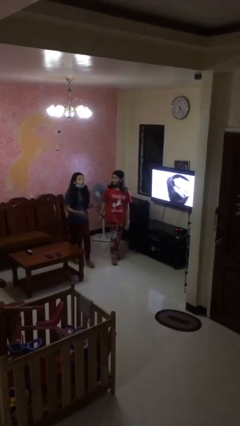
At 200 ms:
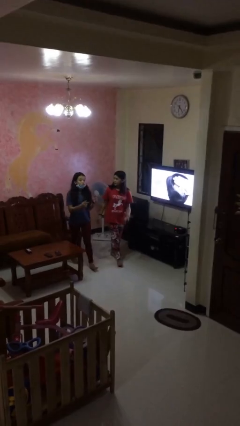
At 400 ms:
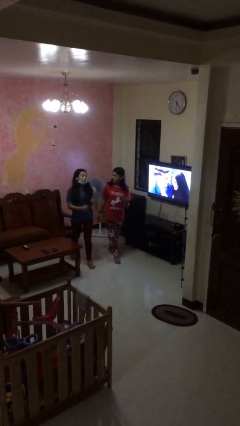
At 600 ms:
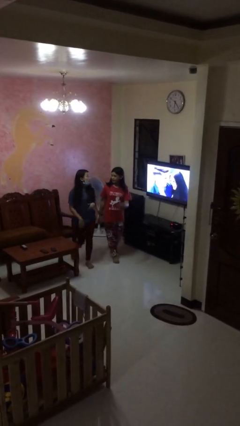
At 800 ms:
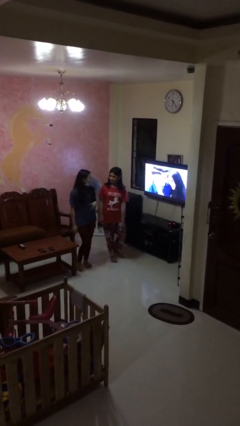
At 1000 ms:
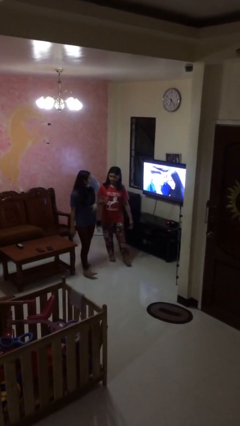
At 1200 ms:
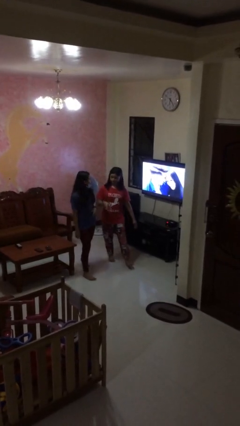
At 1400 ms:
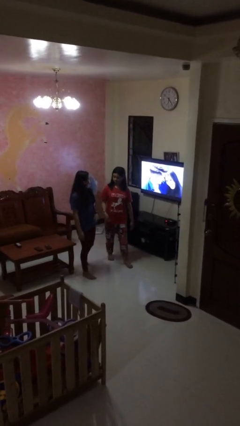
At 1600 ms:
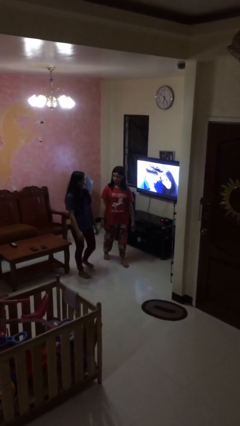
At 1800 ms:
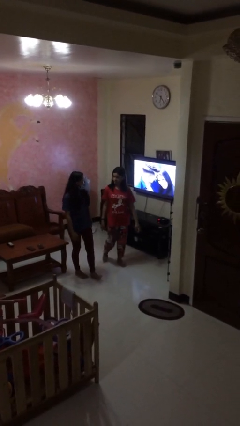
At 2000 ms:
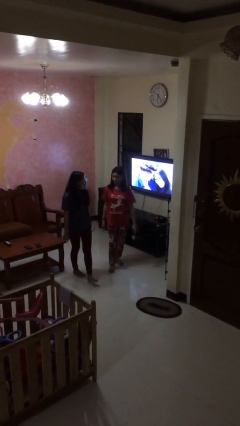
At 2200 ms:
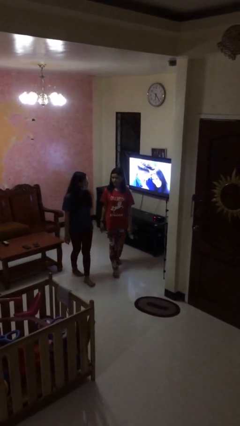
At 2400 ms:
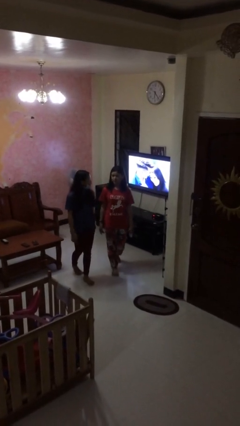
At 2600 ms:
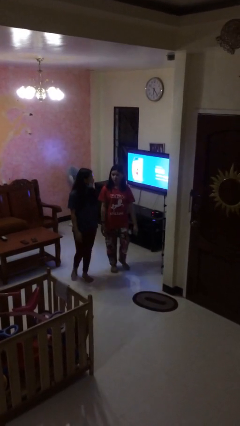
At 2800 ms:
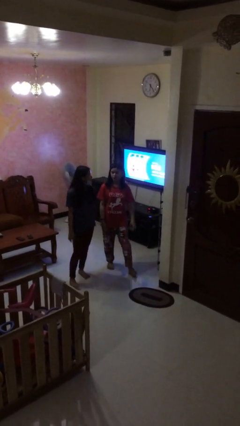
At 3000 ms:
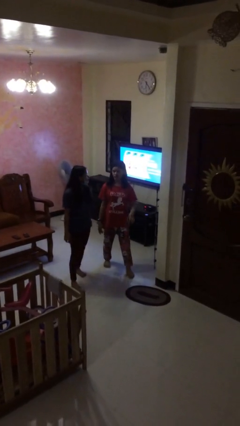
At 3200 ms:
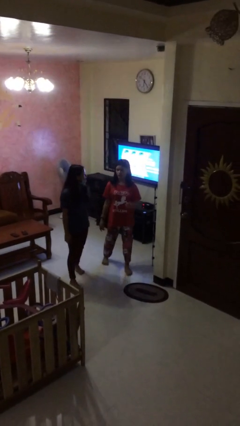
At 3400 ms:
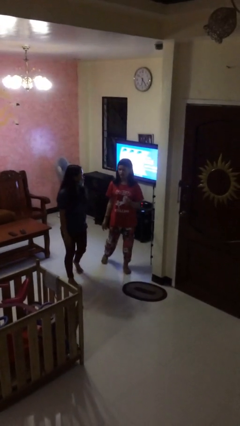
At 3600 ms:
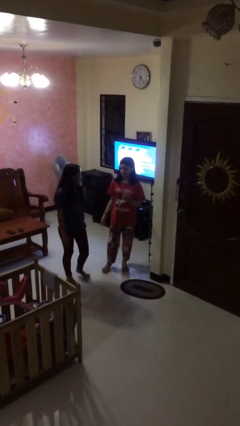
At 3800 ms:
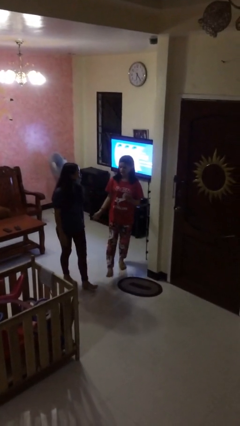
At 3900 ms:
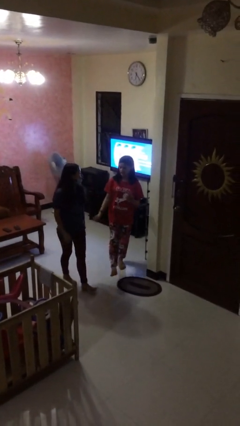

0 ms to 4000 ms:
person talks to person

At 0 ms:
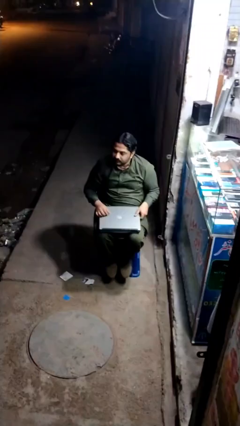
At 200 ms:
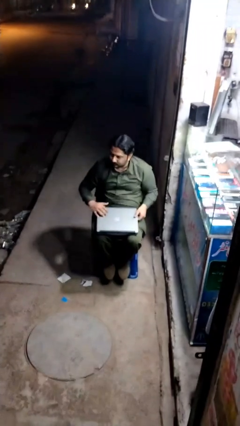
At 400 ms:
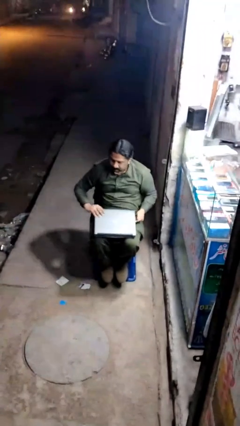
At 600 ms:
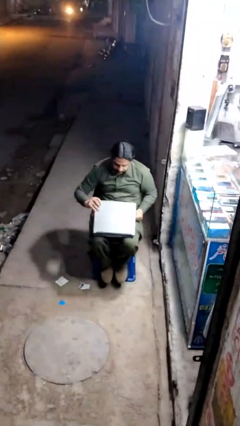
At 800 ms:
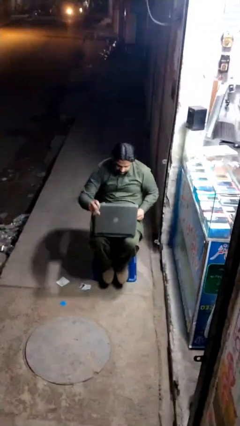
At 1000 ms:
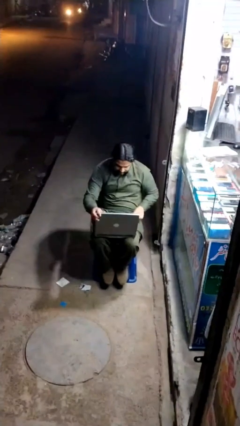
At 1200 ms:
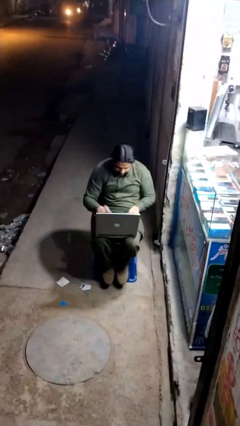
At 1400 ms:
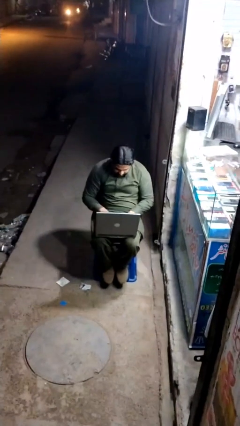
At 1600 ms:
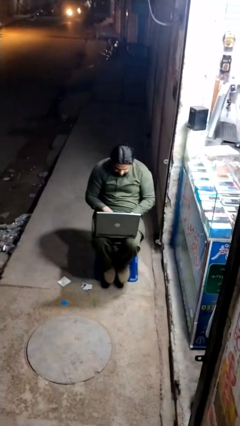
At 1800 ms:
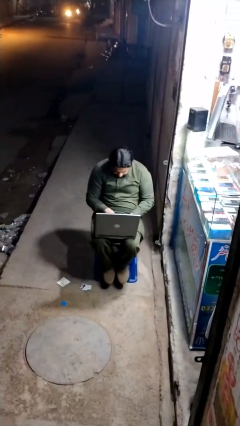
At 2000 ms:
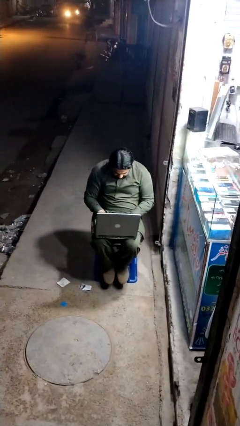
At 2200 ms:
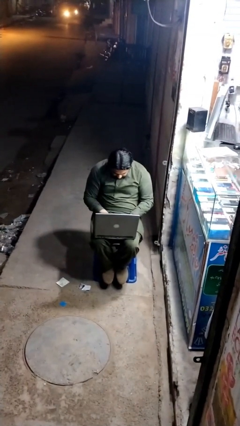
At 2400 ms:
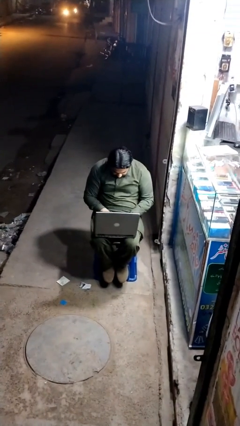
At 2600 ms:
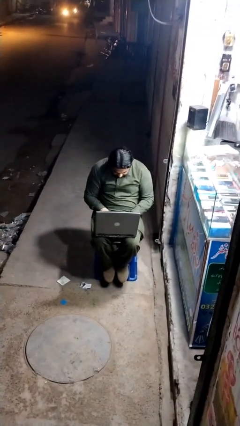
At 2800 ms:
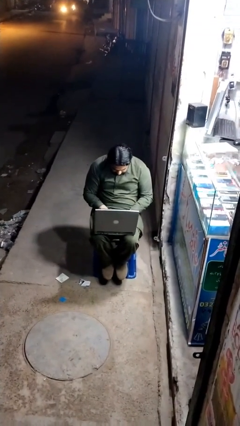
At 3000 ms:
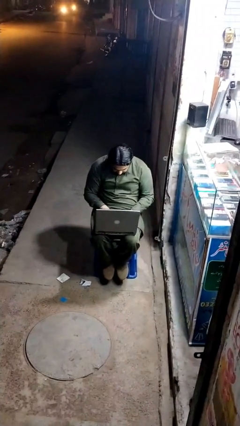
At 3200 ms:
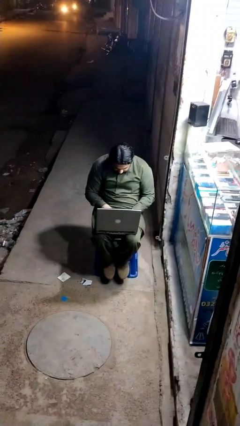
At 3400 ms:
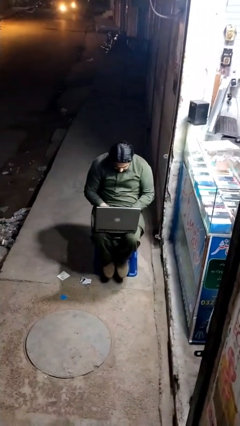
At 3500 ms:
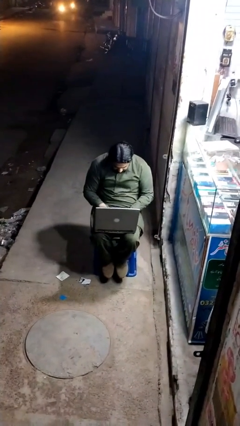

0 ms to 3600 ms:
person interacts with laptop

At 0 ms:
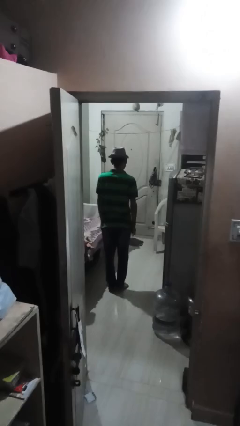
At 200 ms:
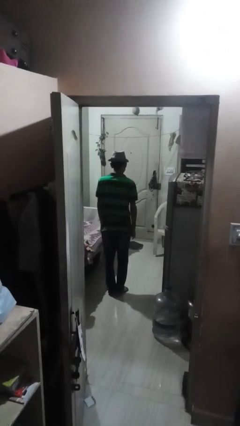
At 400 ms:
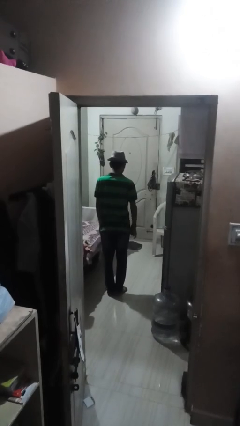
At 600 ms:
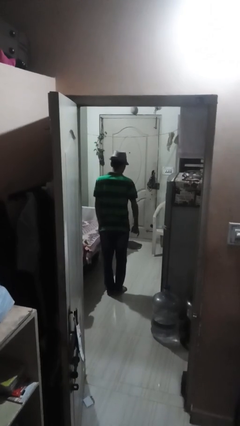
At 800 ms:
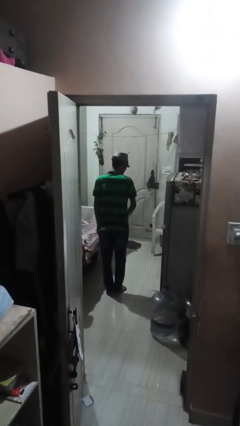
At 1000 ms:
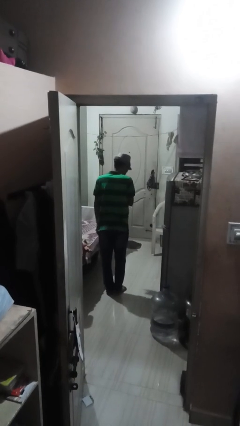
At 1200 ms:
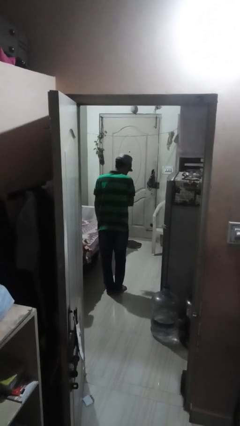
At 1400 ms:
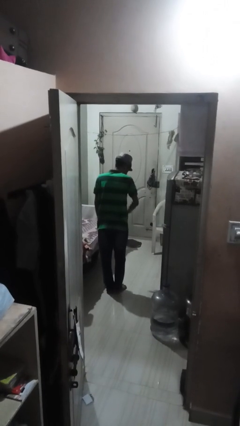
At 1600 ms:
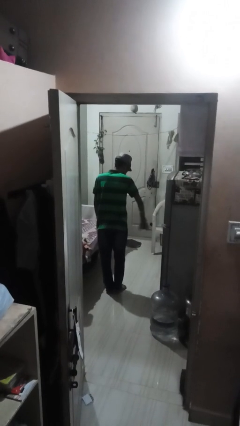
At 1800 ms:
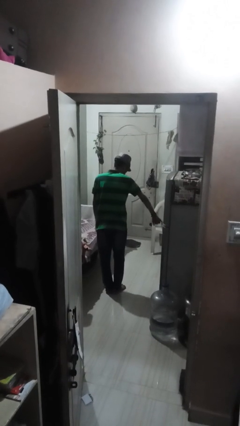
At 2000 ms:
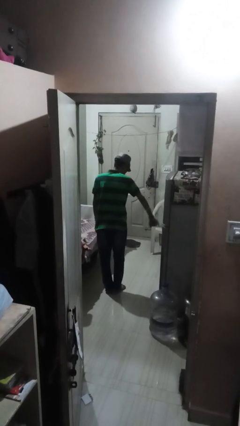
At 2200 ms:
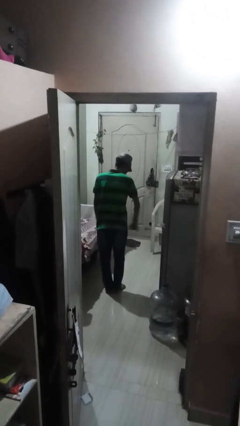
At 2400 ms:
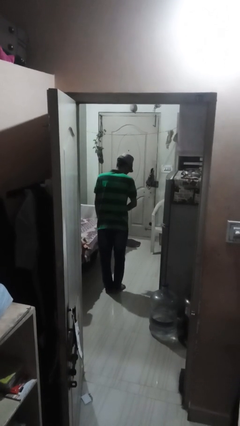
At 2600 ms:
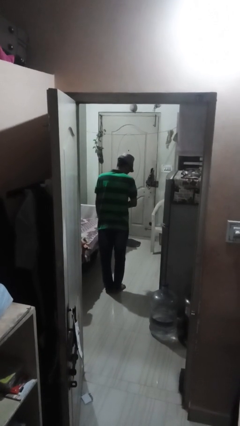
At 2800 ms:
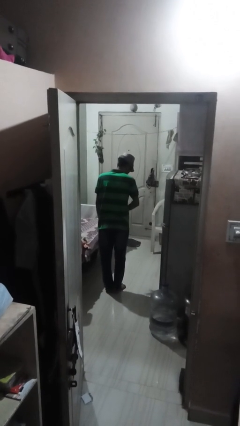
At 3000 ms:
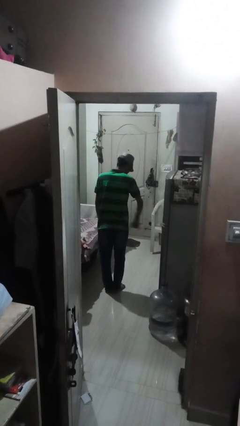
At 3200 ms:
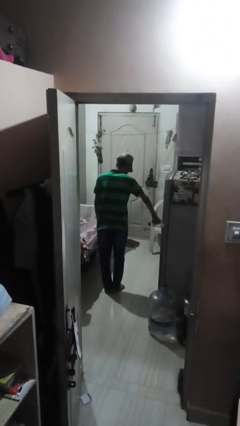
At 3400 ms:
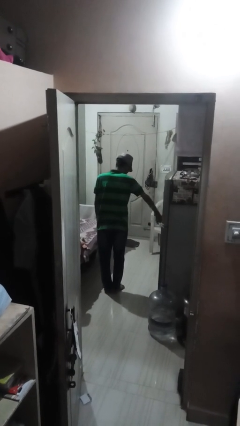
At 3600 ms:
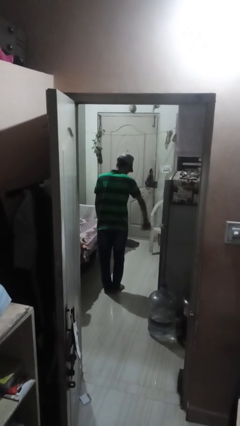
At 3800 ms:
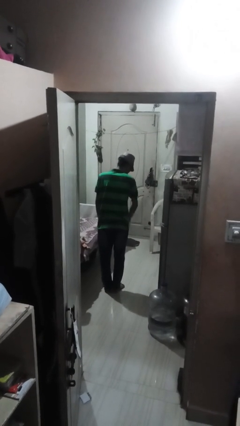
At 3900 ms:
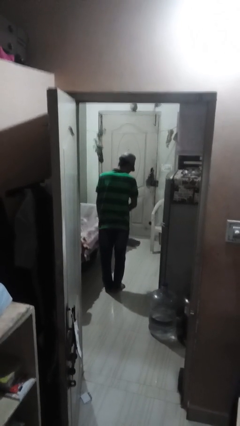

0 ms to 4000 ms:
person gestures hang loose

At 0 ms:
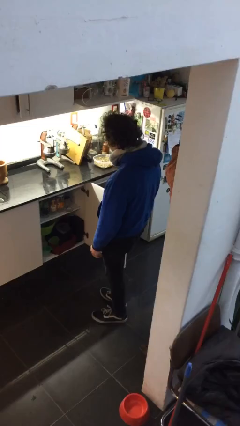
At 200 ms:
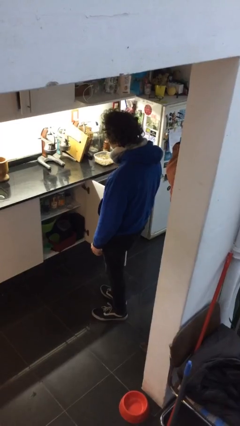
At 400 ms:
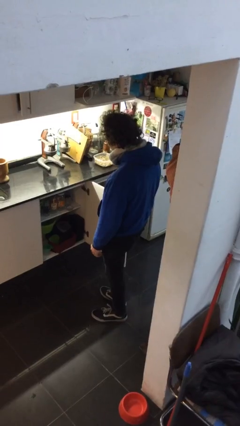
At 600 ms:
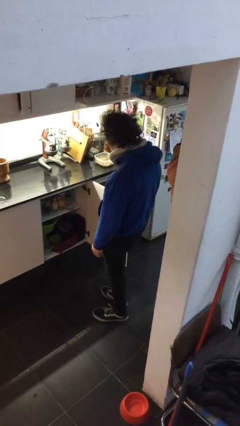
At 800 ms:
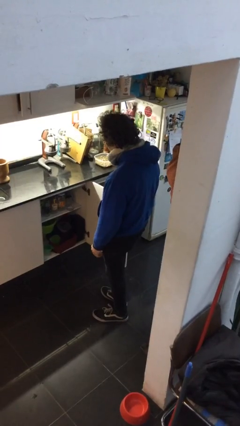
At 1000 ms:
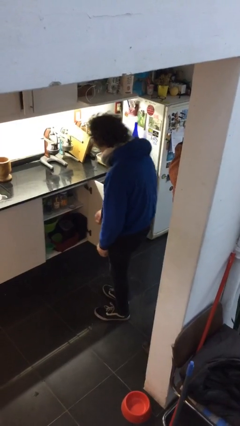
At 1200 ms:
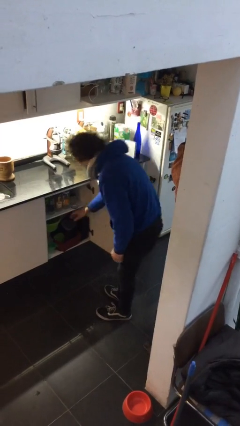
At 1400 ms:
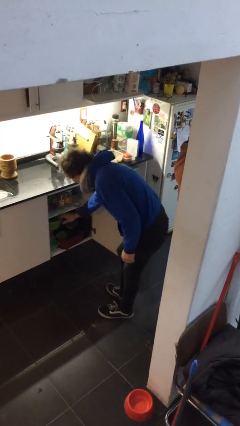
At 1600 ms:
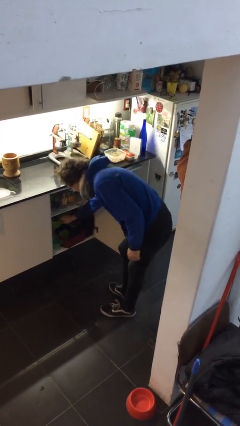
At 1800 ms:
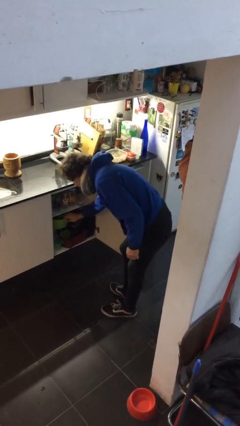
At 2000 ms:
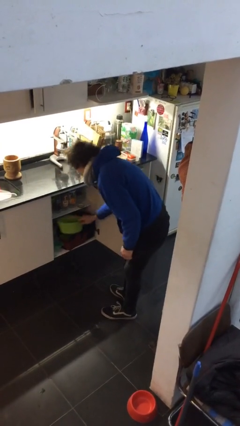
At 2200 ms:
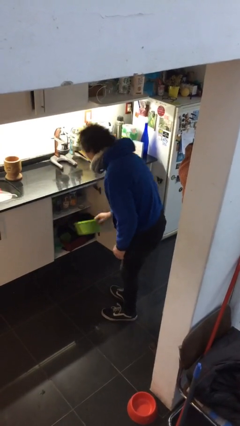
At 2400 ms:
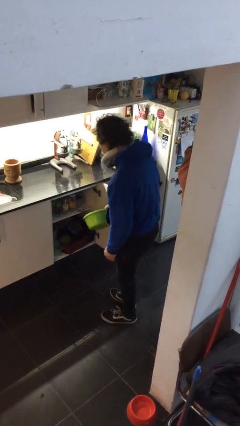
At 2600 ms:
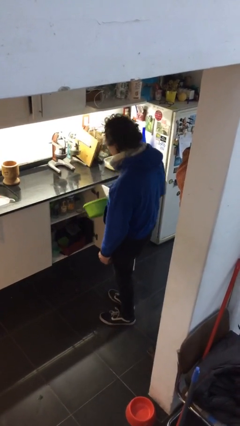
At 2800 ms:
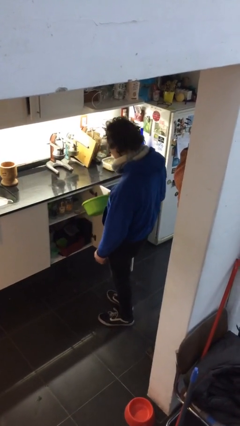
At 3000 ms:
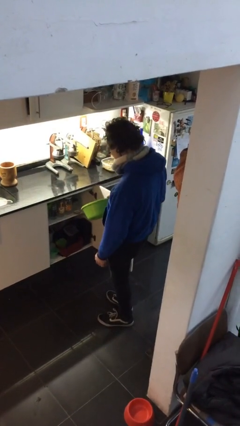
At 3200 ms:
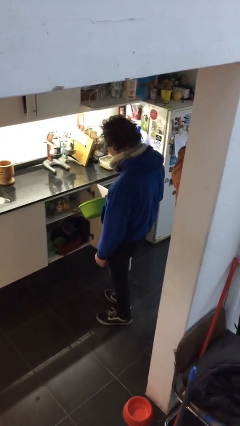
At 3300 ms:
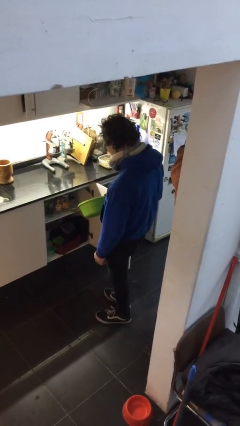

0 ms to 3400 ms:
person picks up object from cabinet

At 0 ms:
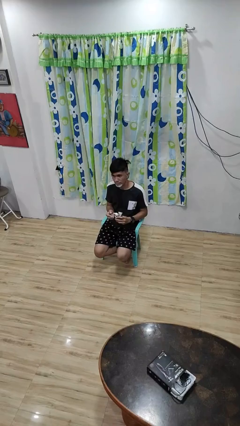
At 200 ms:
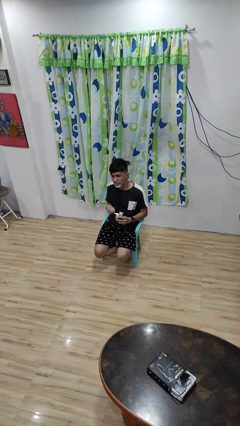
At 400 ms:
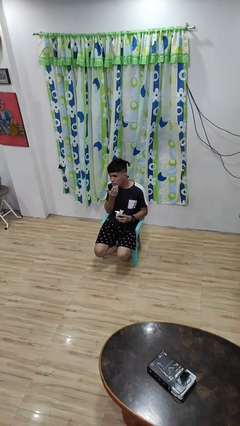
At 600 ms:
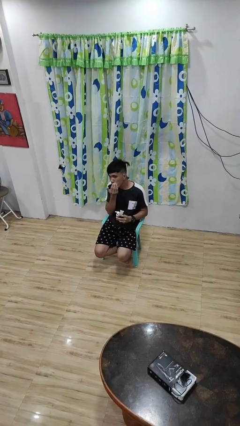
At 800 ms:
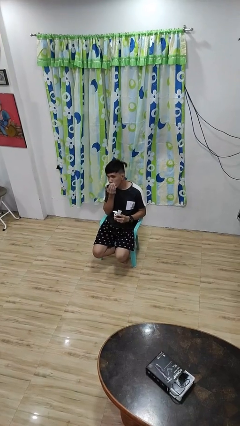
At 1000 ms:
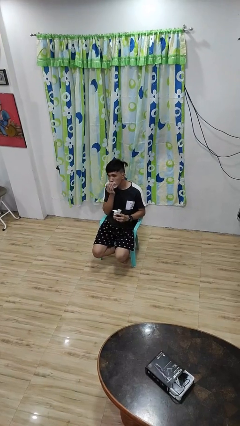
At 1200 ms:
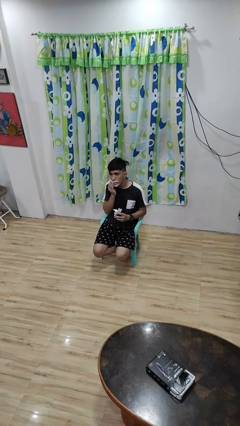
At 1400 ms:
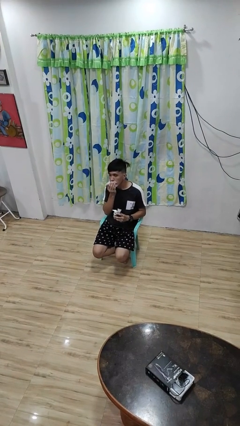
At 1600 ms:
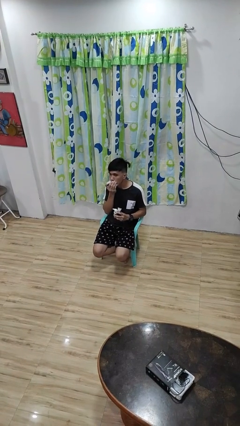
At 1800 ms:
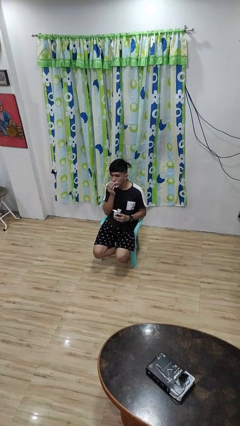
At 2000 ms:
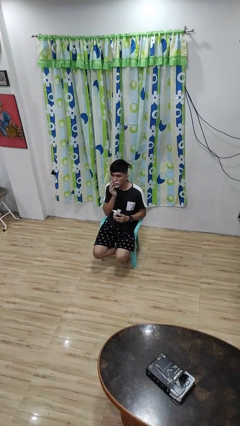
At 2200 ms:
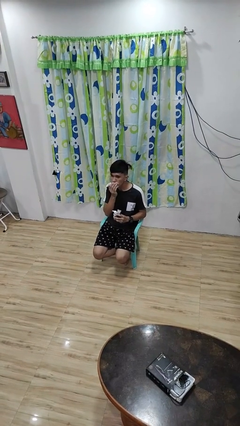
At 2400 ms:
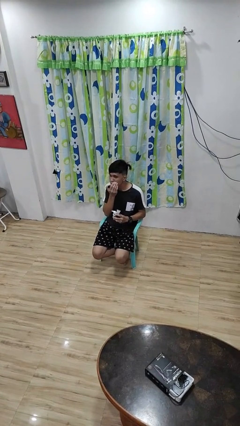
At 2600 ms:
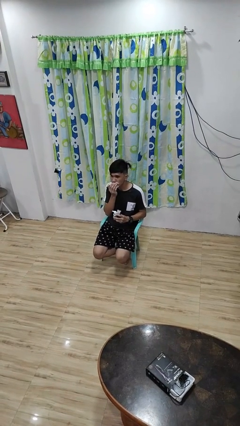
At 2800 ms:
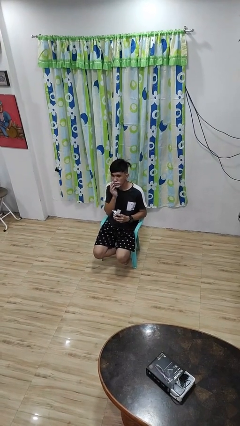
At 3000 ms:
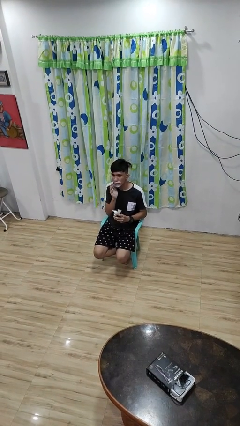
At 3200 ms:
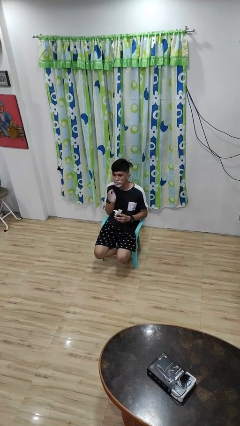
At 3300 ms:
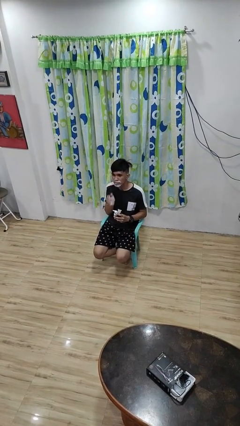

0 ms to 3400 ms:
person applies shaving cream
